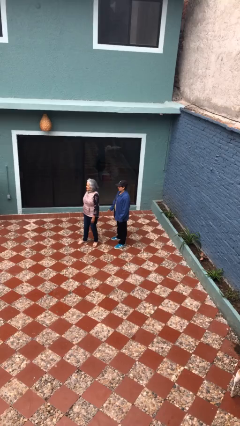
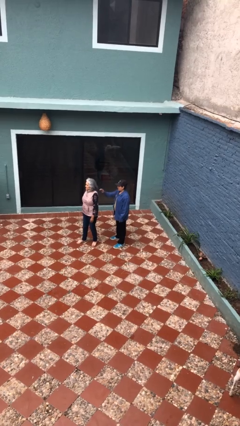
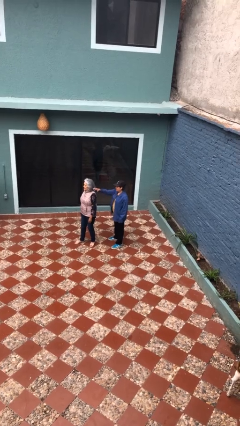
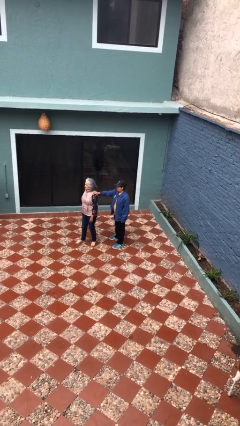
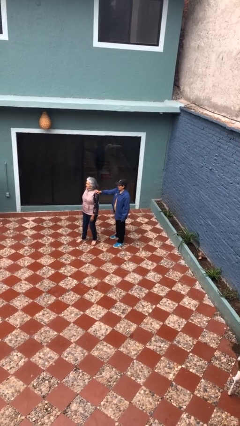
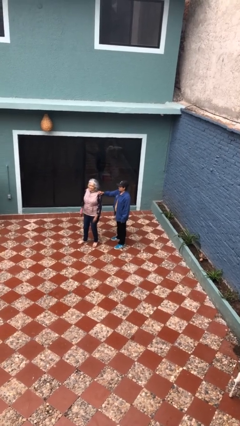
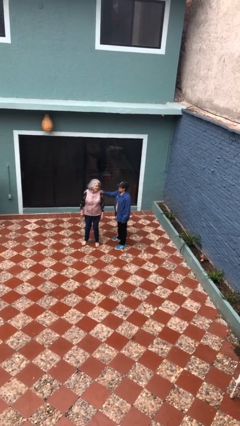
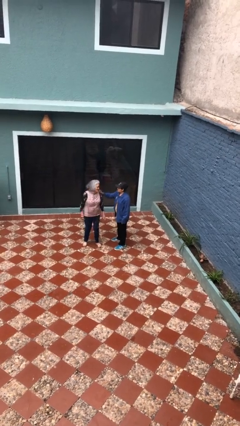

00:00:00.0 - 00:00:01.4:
person grabs person by shoulder

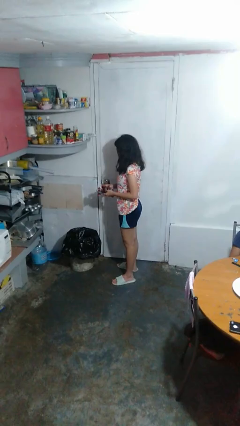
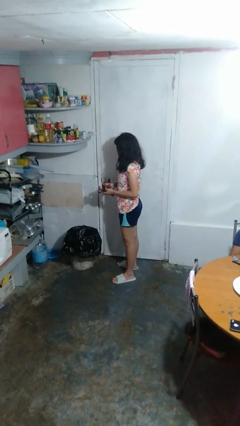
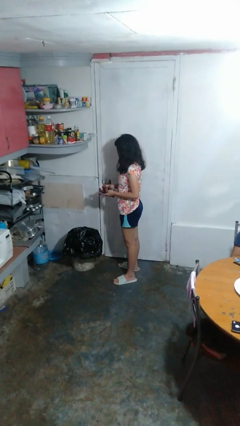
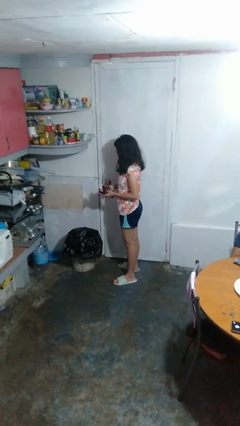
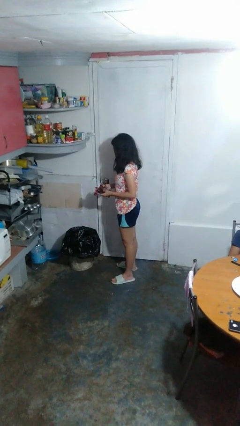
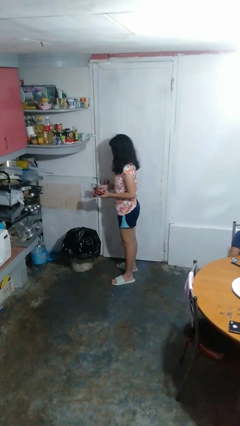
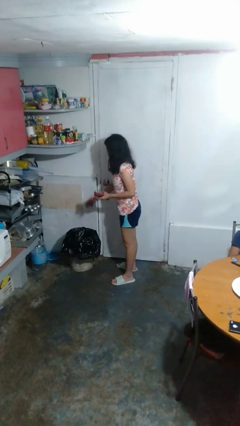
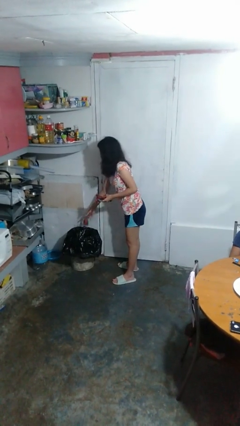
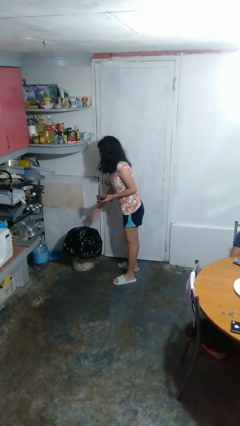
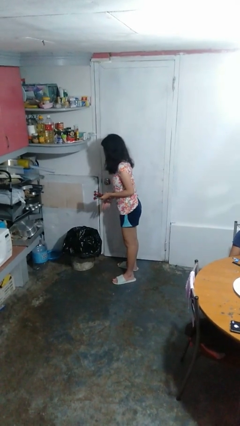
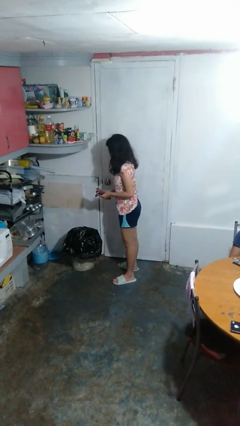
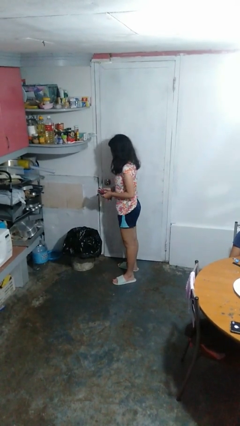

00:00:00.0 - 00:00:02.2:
person discards trash

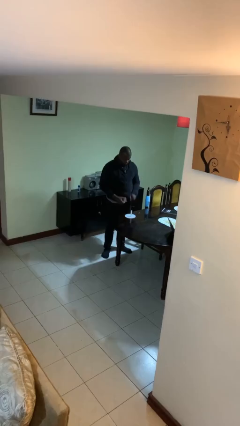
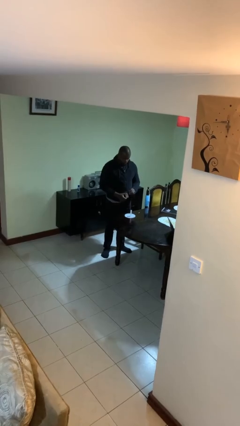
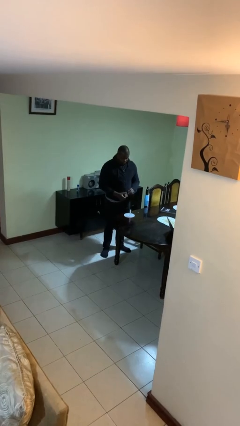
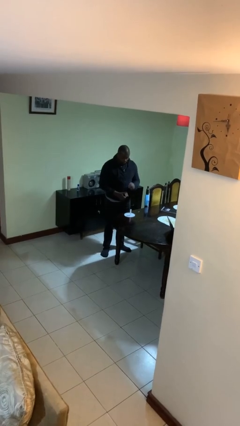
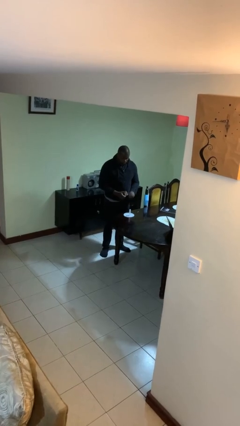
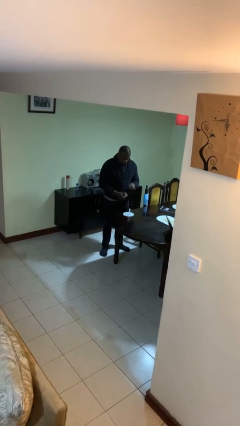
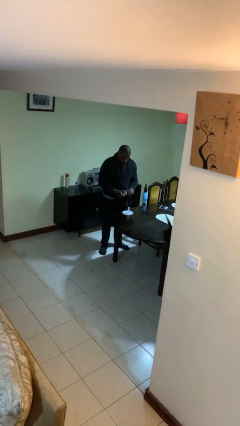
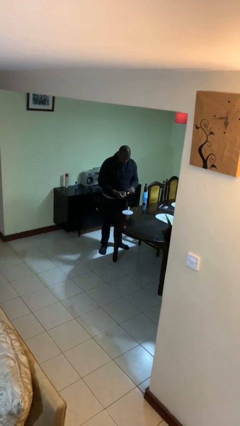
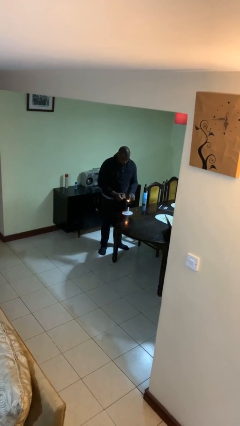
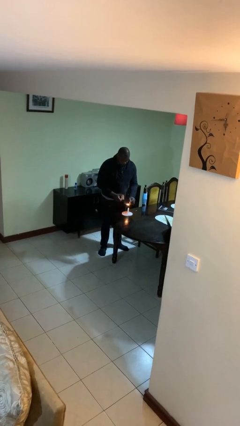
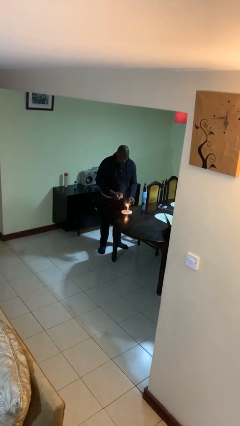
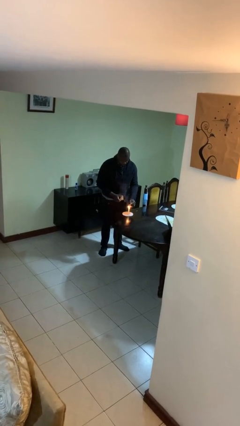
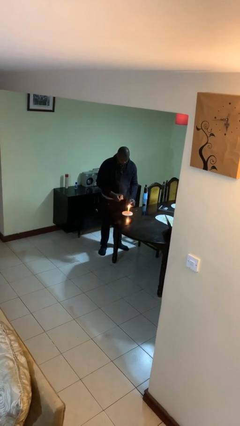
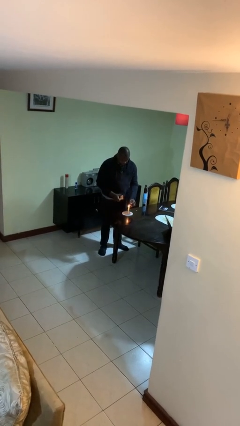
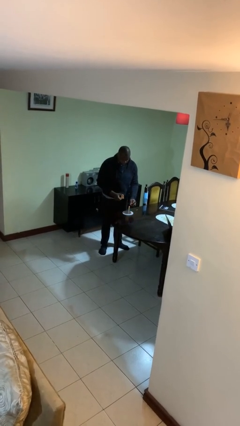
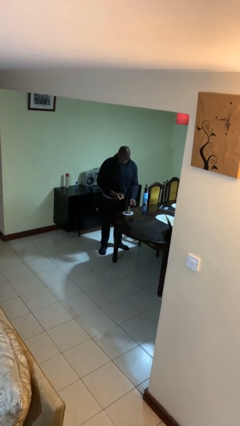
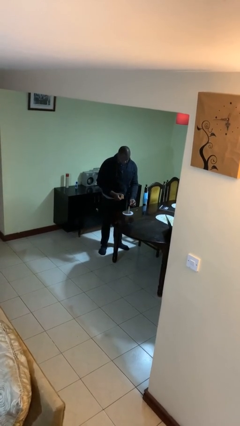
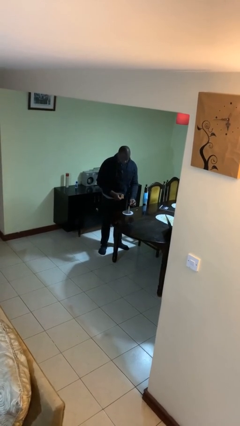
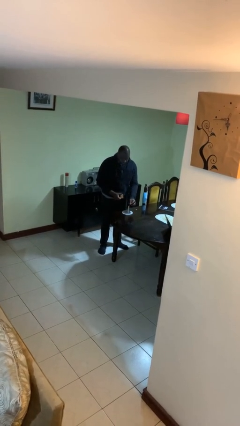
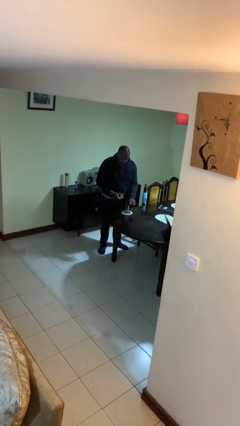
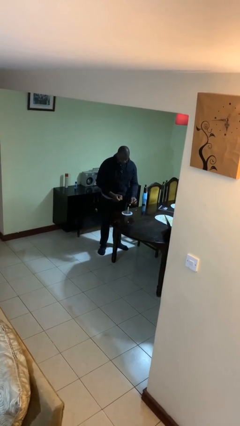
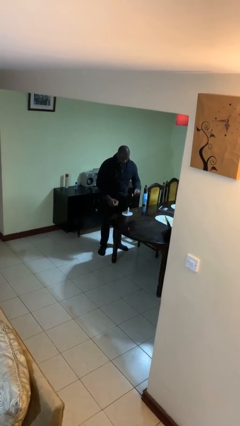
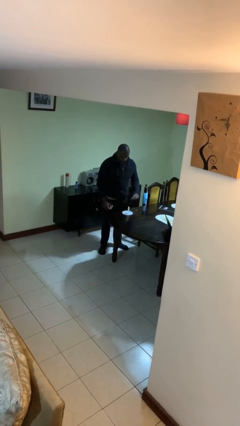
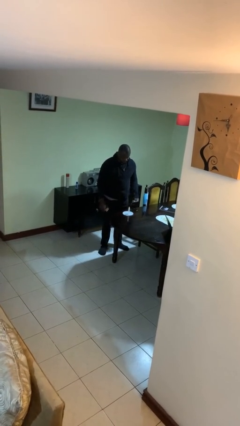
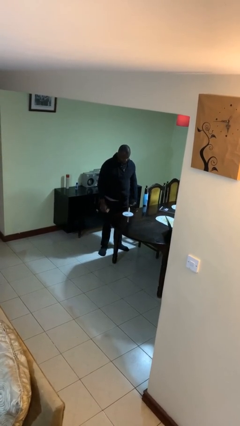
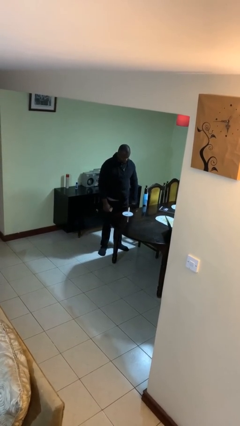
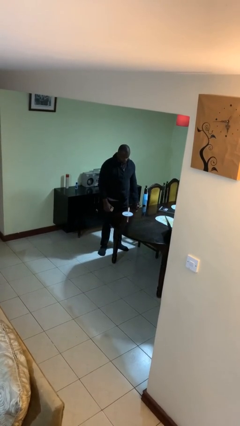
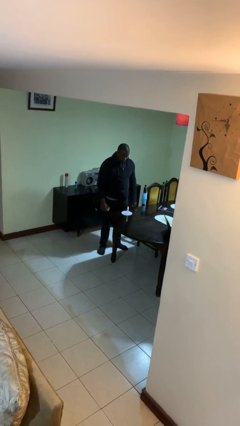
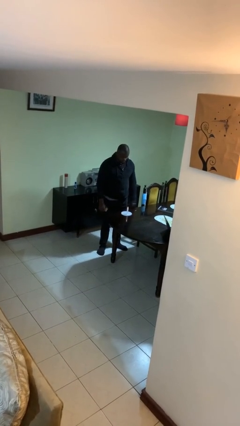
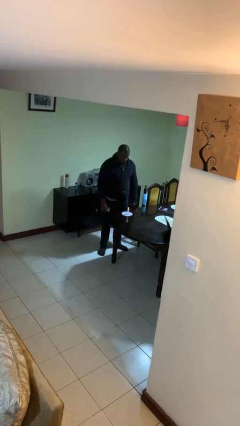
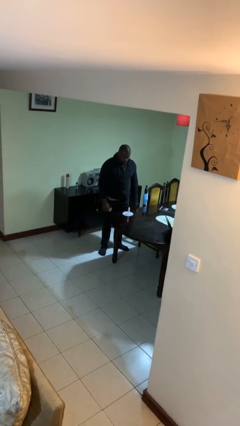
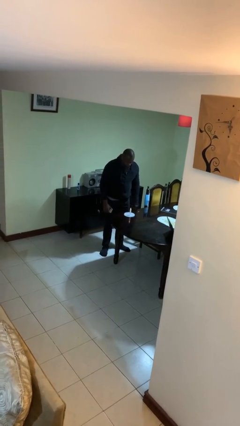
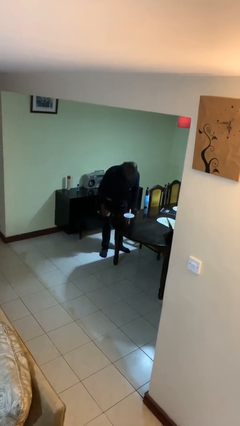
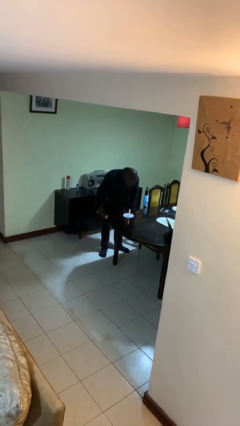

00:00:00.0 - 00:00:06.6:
person lights candle

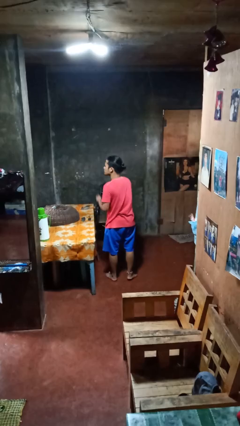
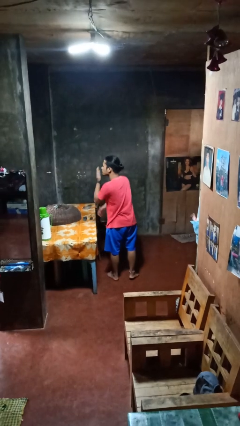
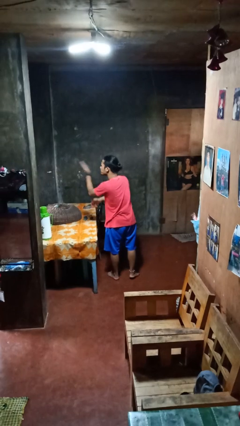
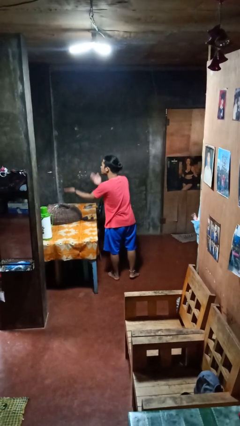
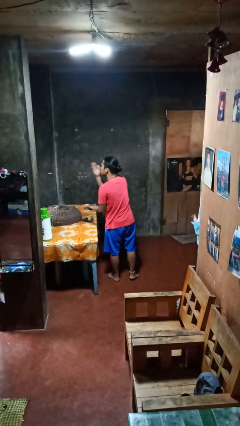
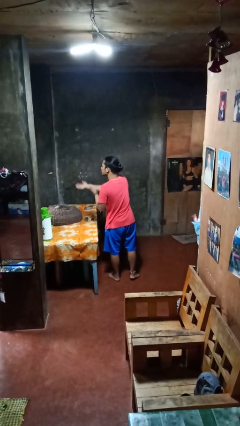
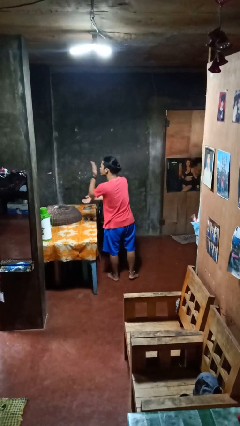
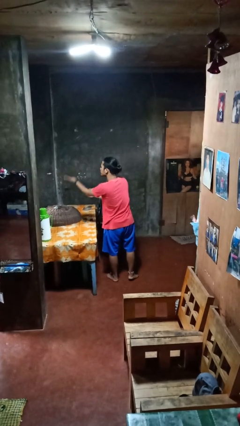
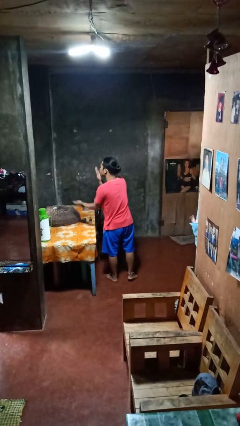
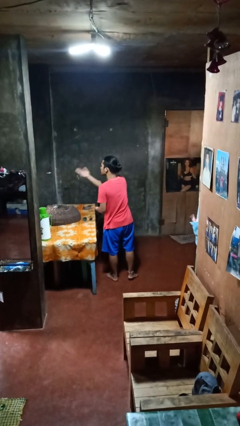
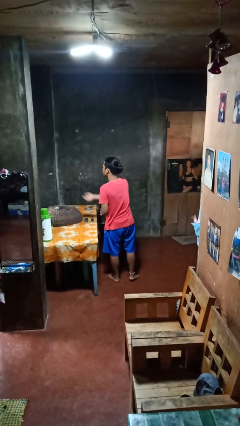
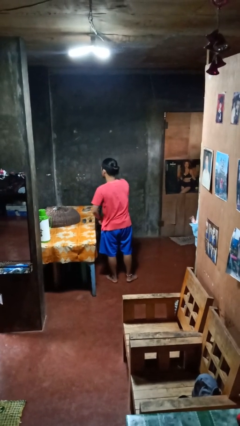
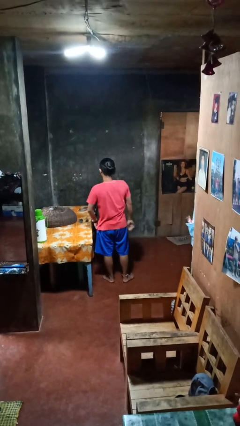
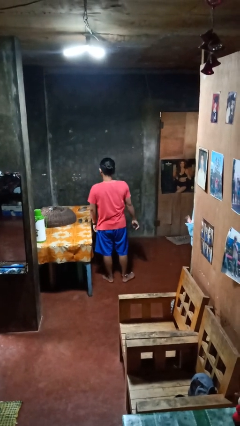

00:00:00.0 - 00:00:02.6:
person gestures blow kiss

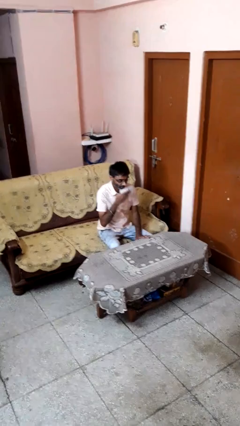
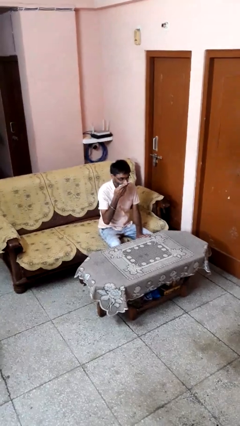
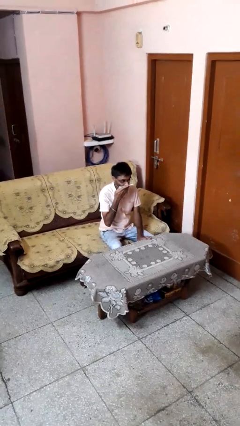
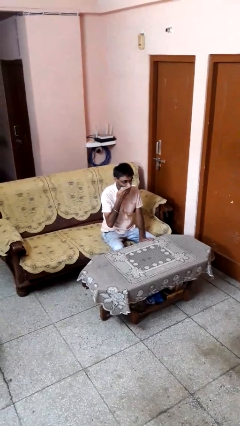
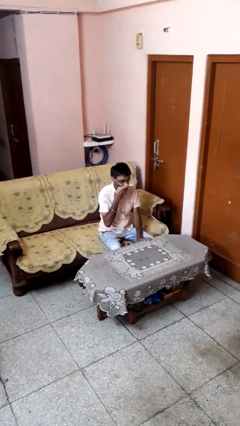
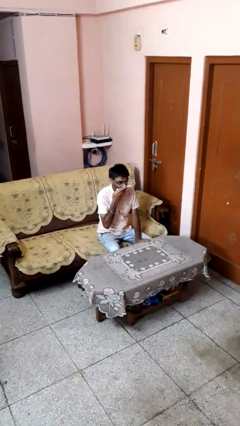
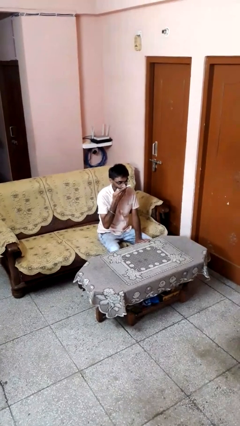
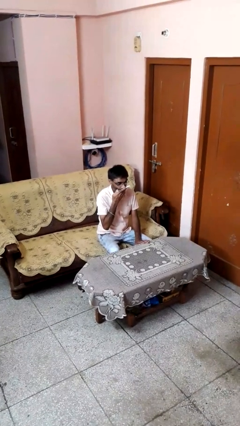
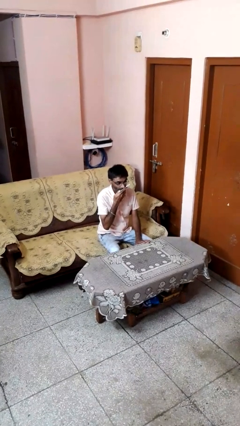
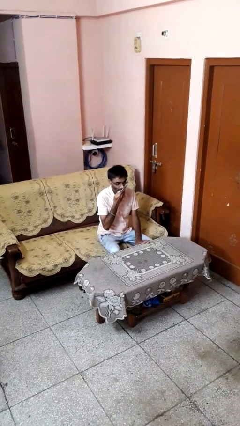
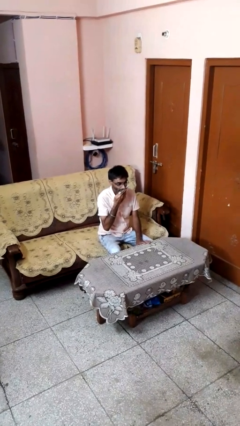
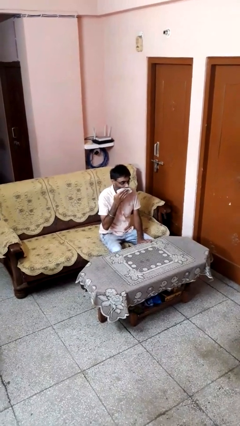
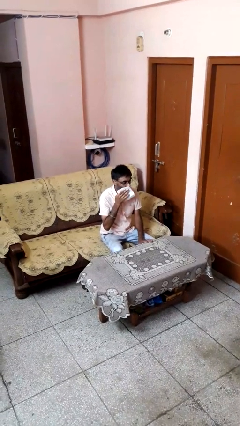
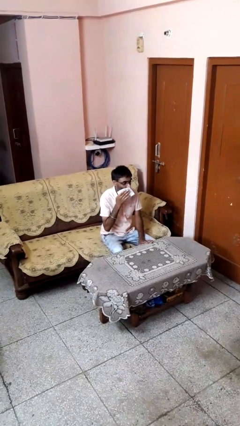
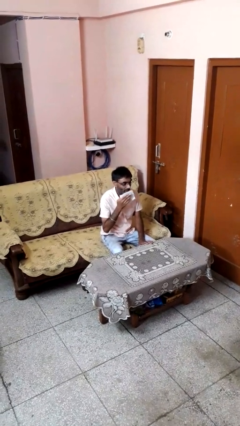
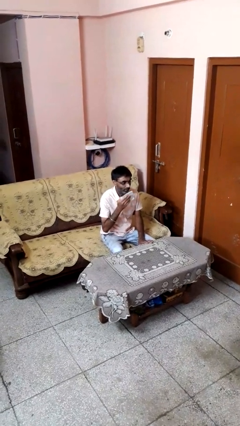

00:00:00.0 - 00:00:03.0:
person wipes mouth with napkin

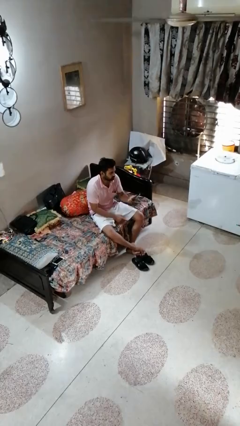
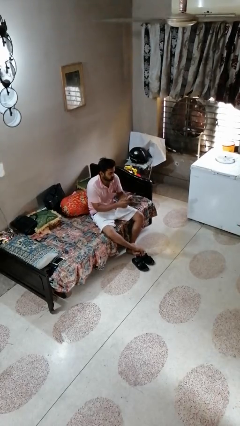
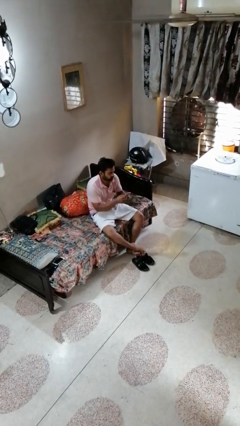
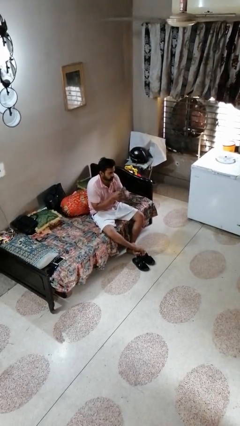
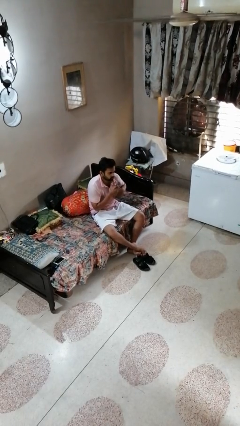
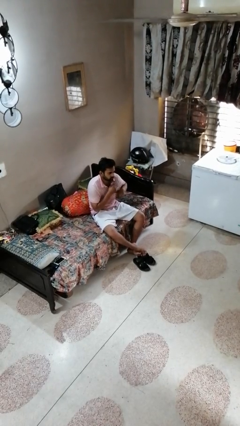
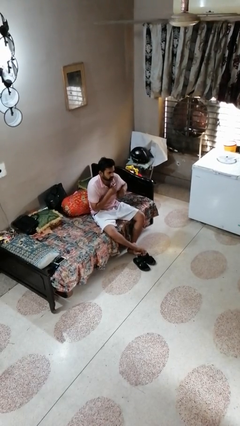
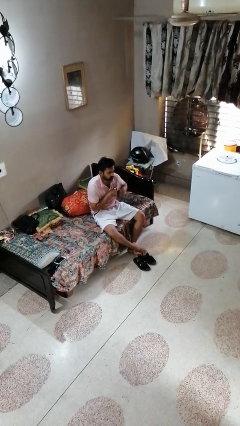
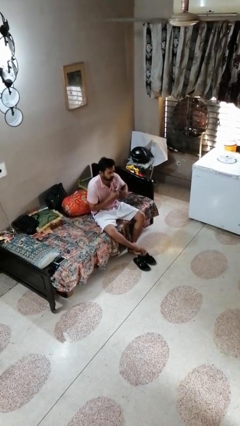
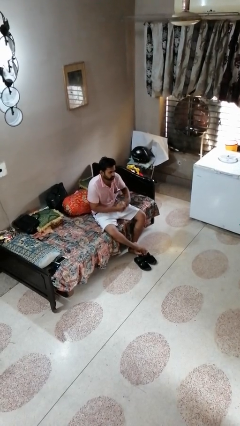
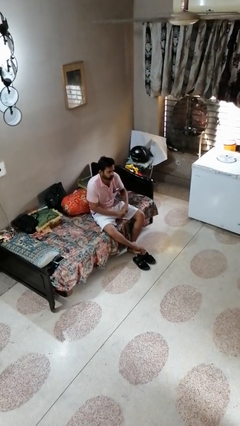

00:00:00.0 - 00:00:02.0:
person puts phone into pocket
